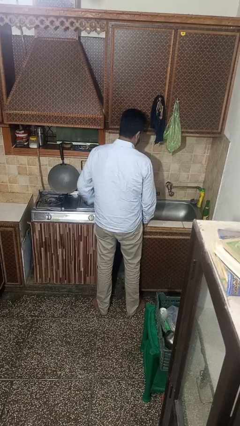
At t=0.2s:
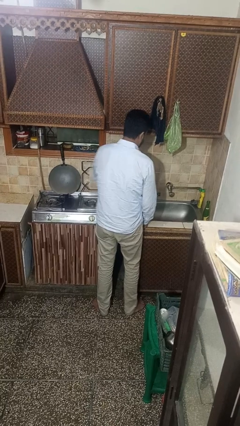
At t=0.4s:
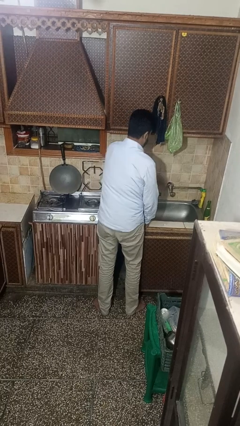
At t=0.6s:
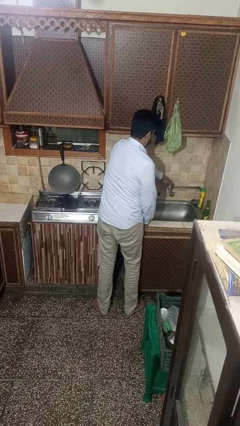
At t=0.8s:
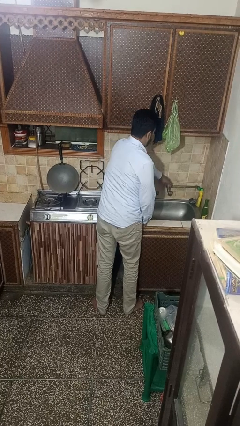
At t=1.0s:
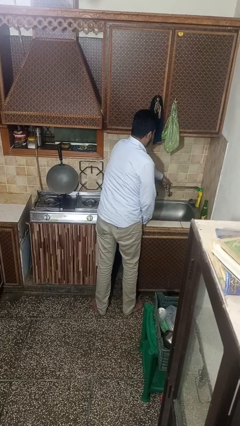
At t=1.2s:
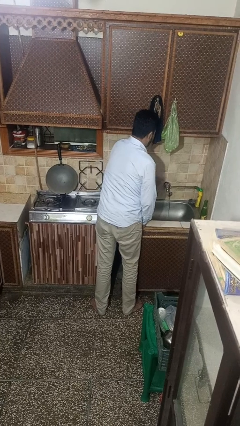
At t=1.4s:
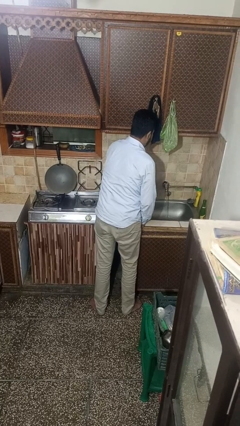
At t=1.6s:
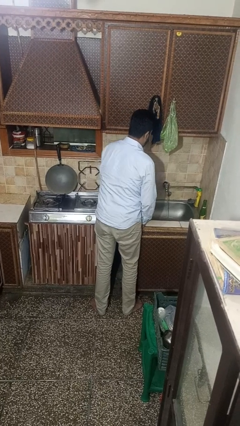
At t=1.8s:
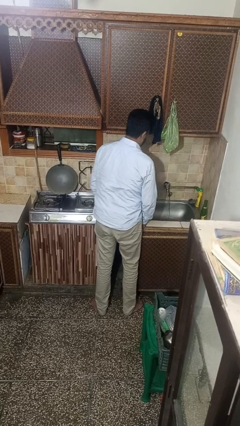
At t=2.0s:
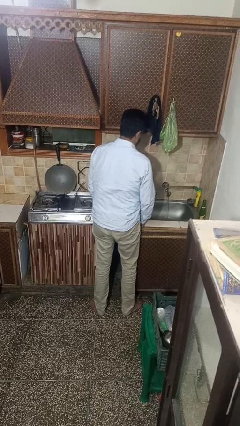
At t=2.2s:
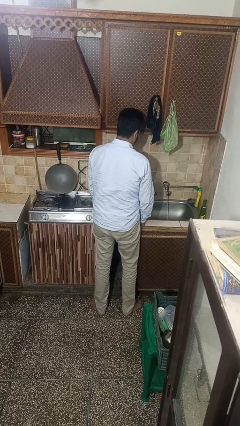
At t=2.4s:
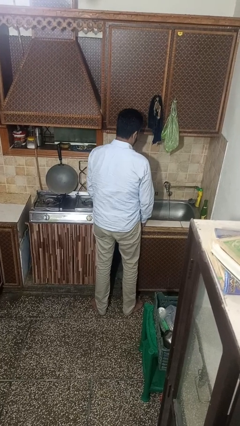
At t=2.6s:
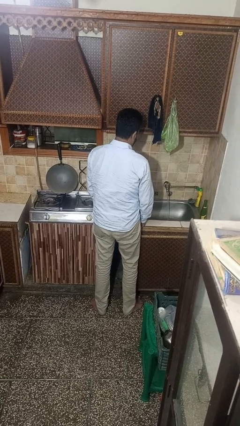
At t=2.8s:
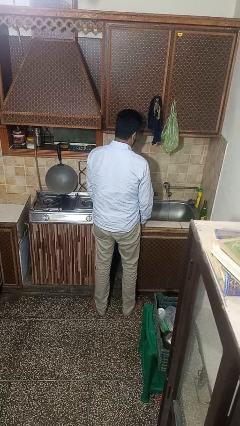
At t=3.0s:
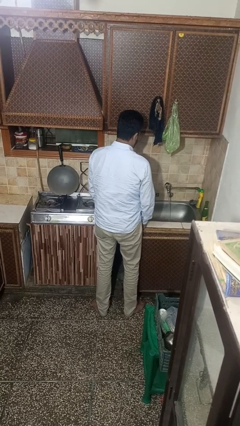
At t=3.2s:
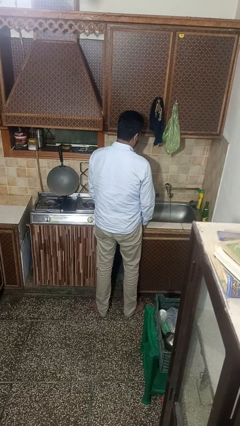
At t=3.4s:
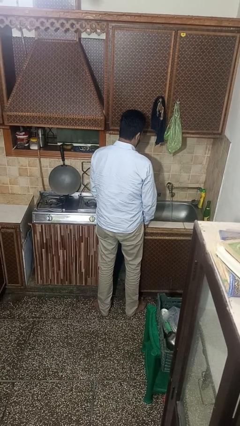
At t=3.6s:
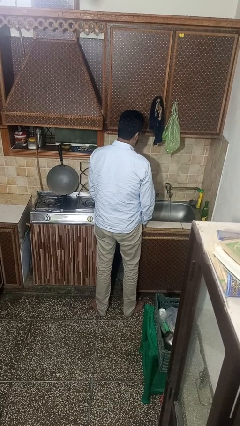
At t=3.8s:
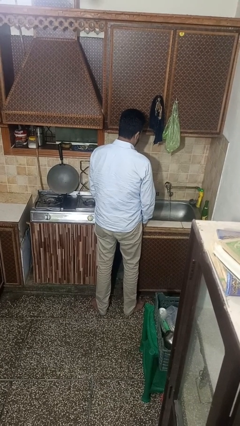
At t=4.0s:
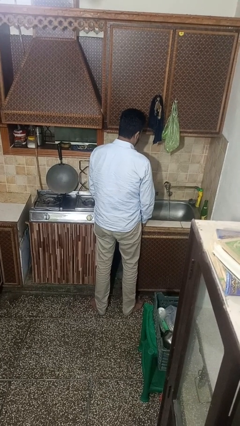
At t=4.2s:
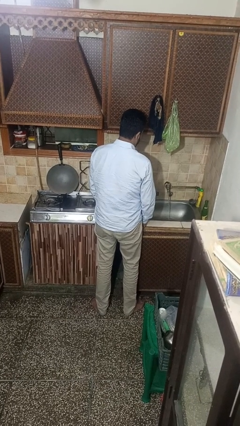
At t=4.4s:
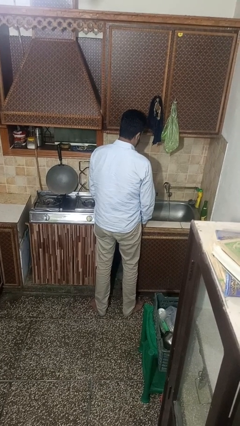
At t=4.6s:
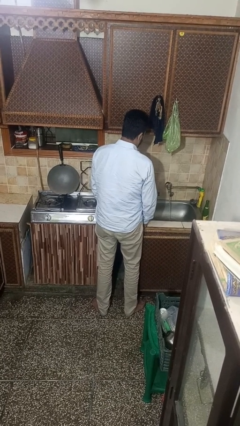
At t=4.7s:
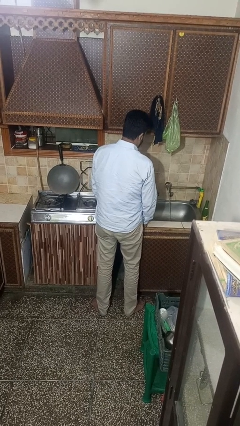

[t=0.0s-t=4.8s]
person turns on faucet

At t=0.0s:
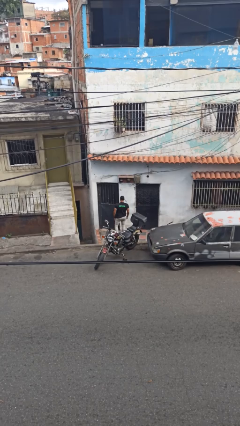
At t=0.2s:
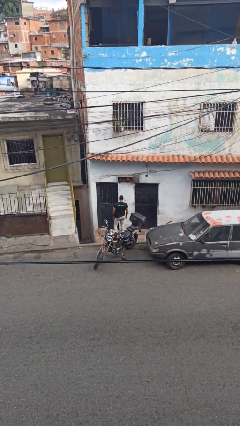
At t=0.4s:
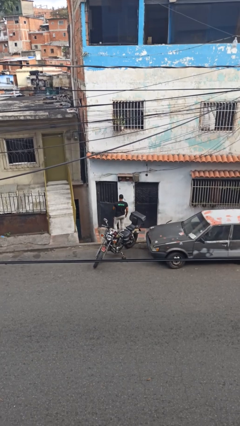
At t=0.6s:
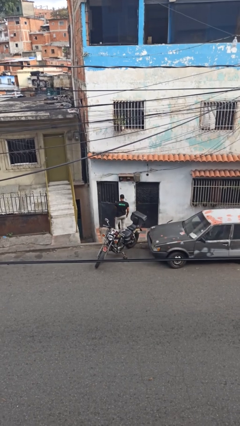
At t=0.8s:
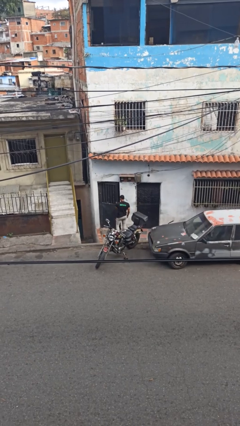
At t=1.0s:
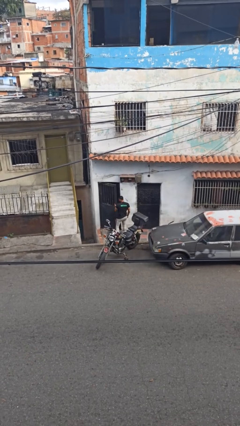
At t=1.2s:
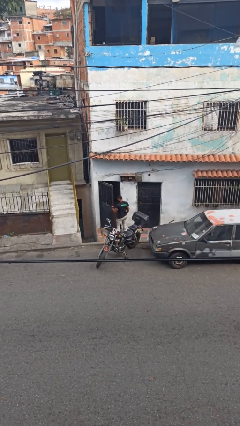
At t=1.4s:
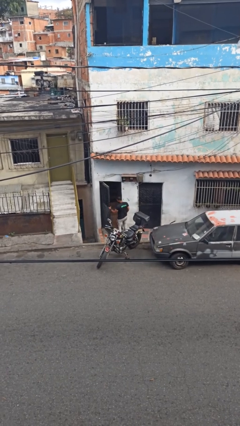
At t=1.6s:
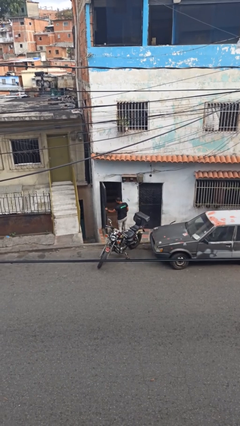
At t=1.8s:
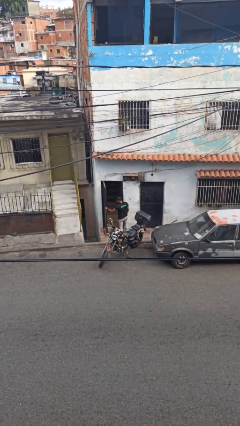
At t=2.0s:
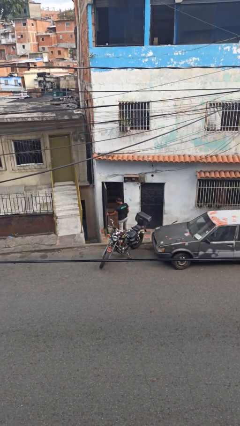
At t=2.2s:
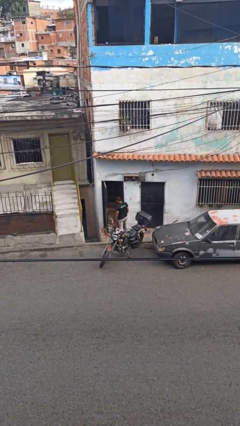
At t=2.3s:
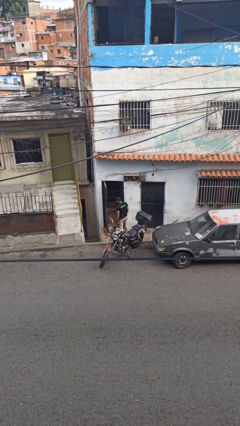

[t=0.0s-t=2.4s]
person opens facility door

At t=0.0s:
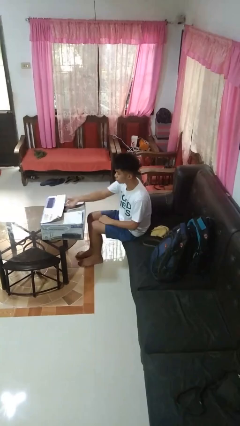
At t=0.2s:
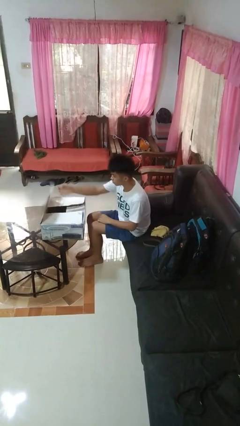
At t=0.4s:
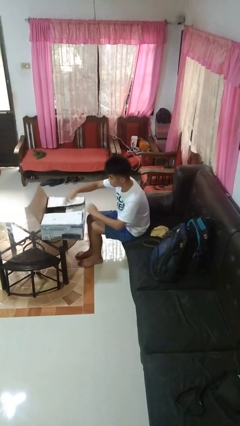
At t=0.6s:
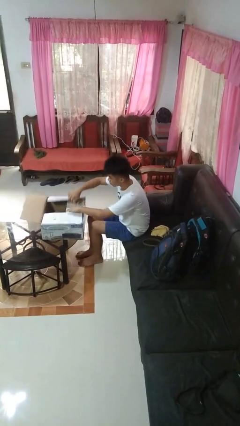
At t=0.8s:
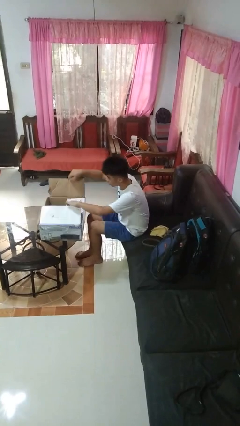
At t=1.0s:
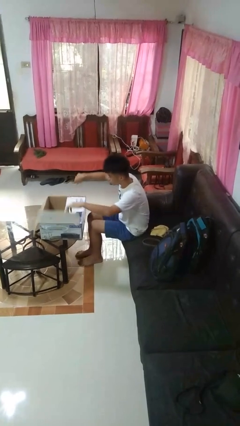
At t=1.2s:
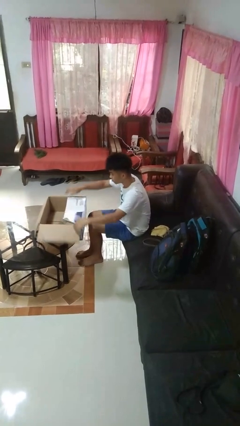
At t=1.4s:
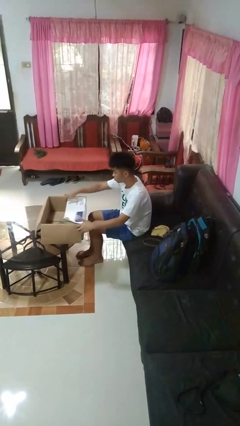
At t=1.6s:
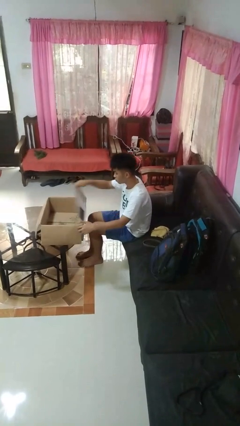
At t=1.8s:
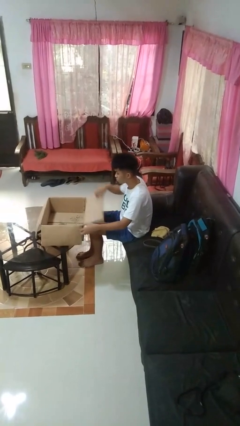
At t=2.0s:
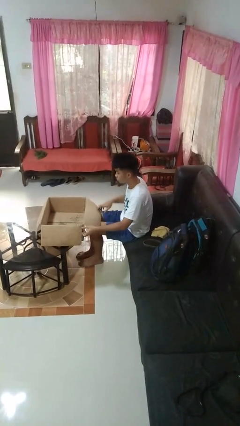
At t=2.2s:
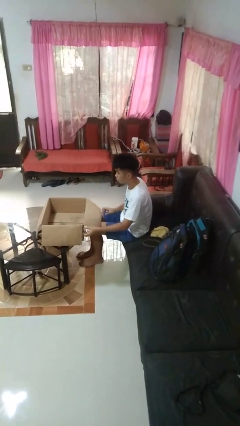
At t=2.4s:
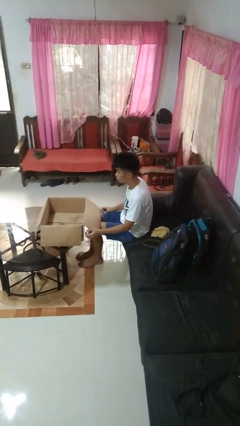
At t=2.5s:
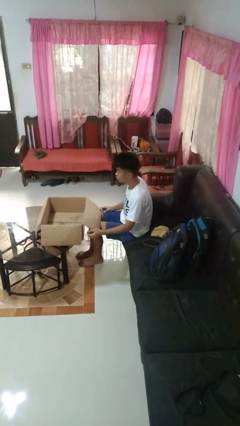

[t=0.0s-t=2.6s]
person opens box

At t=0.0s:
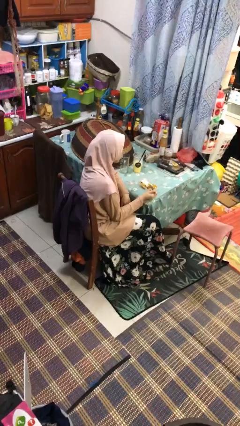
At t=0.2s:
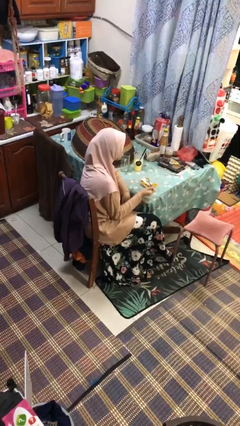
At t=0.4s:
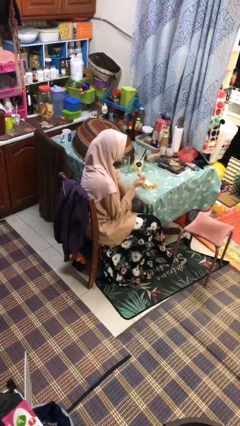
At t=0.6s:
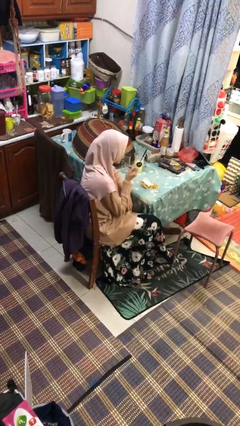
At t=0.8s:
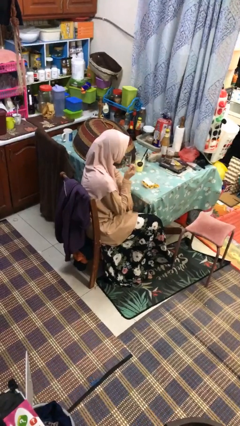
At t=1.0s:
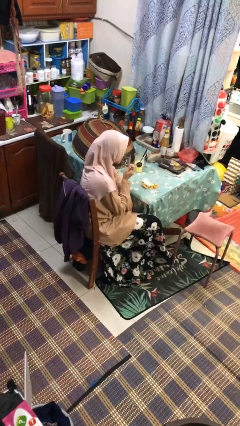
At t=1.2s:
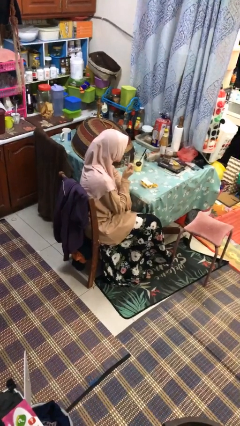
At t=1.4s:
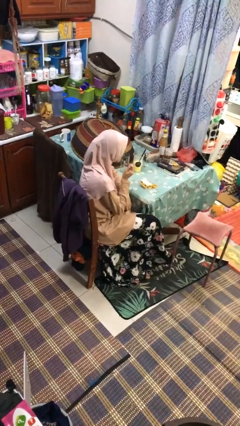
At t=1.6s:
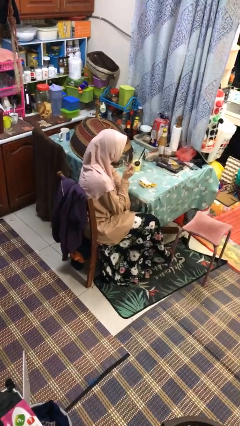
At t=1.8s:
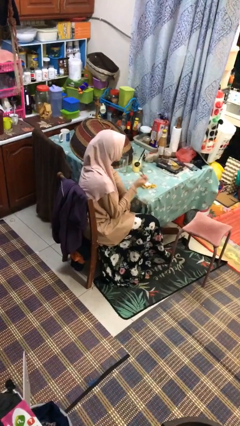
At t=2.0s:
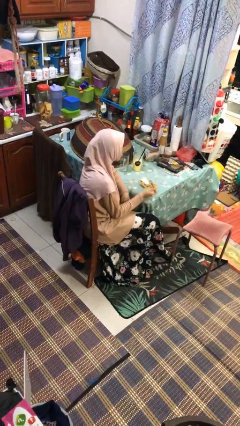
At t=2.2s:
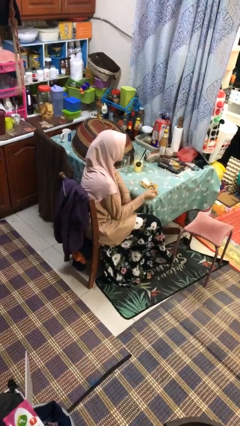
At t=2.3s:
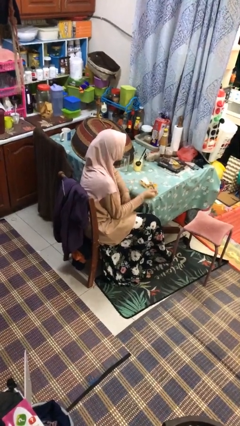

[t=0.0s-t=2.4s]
person eats with utensil

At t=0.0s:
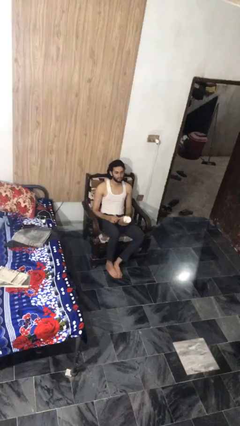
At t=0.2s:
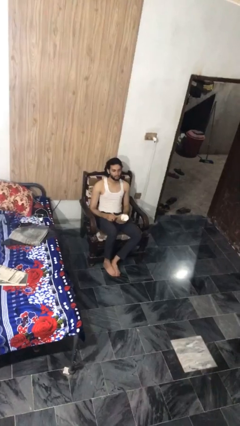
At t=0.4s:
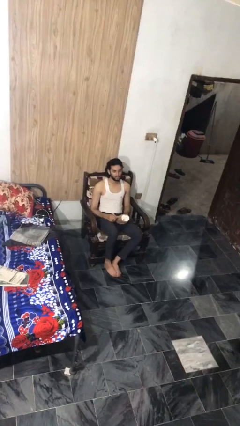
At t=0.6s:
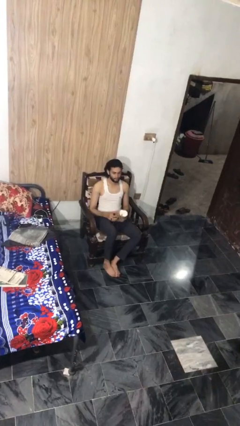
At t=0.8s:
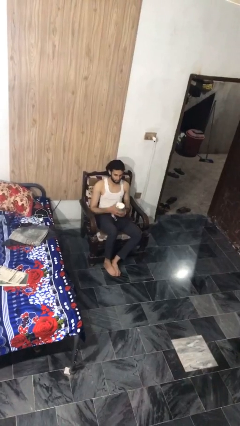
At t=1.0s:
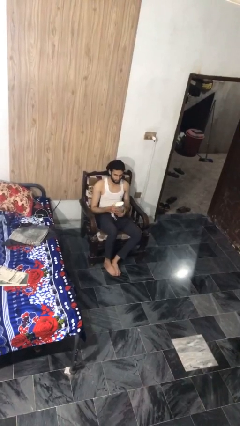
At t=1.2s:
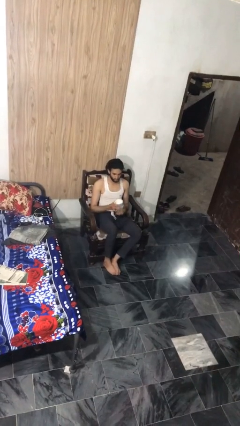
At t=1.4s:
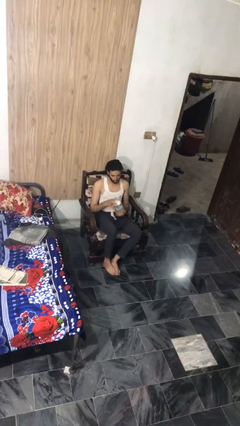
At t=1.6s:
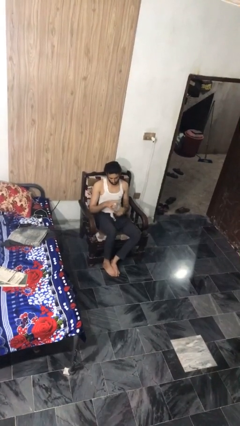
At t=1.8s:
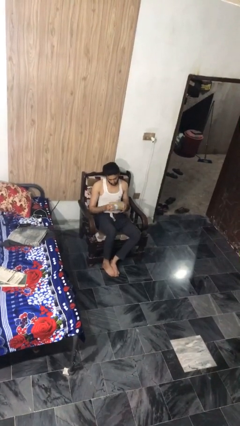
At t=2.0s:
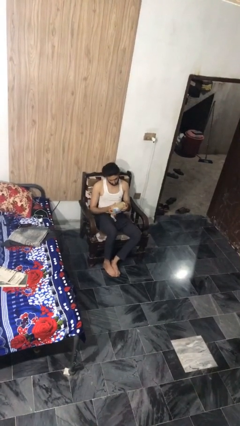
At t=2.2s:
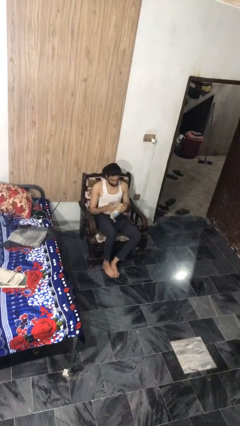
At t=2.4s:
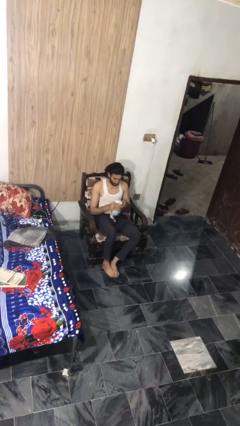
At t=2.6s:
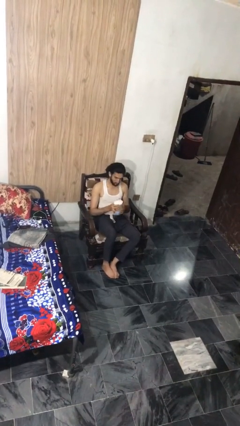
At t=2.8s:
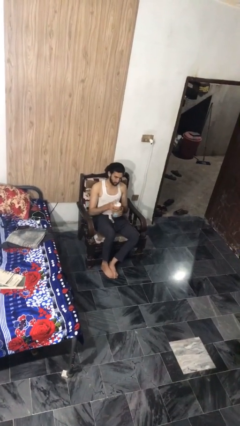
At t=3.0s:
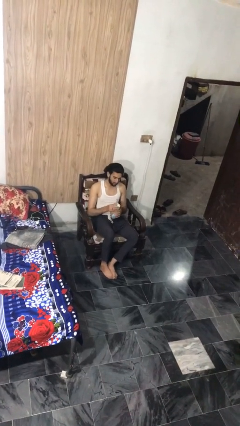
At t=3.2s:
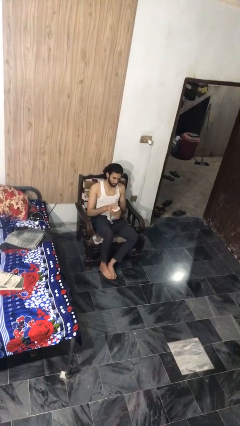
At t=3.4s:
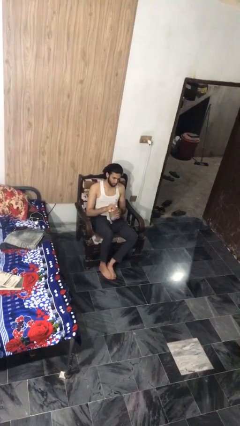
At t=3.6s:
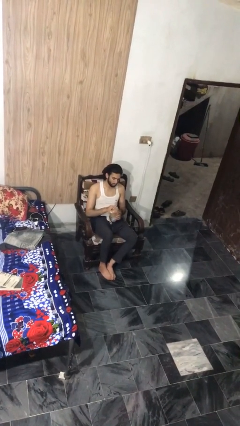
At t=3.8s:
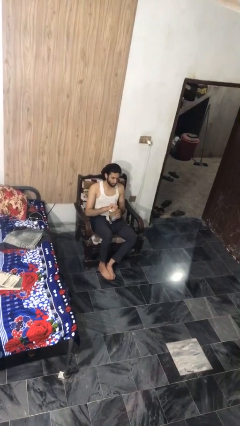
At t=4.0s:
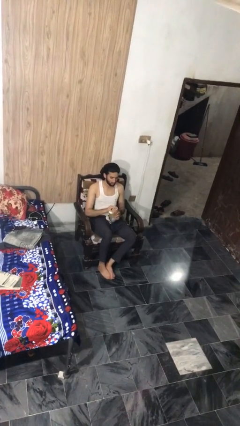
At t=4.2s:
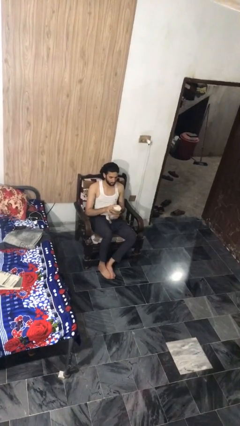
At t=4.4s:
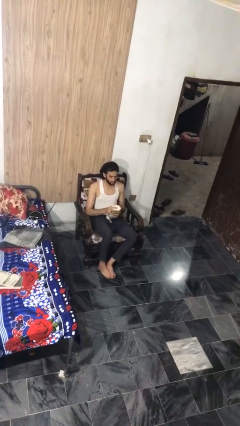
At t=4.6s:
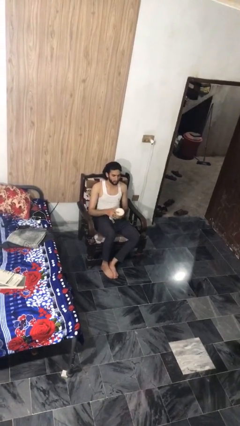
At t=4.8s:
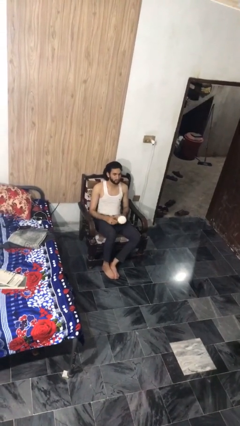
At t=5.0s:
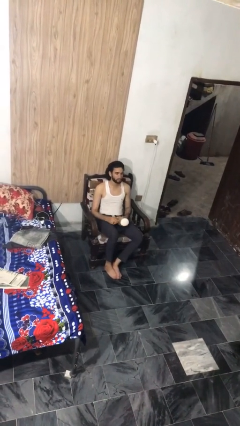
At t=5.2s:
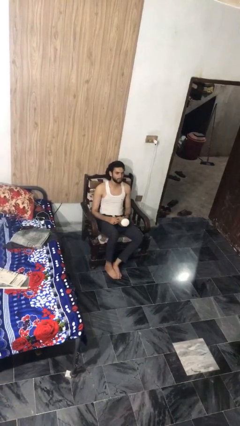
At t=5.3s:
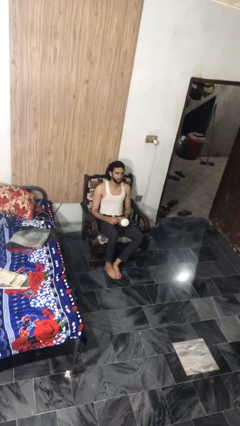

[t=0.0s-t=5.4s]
person squeezes object
